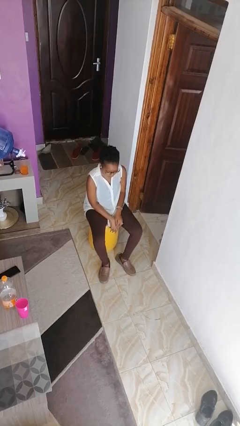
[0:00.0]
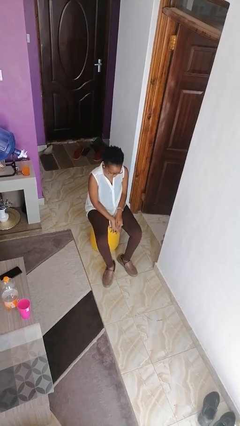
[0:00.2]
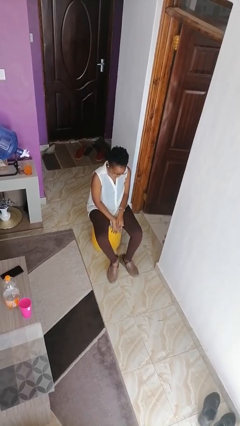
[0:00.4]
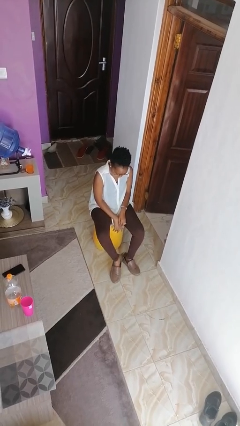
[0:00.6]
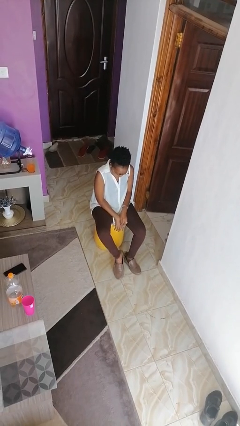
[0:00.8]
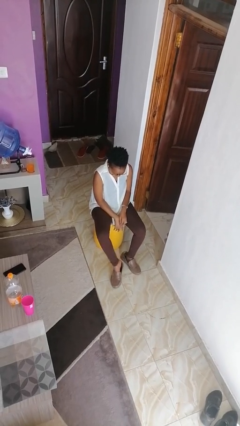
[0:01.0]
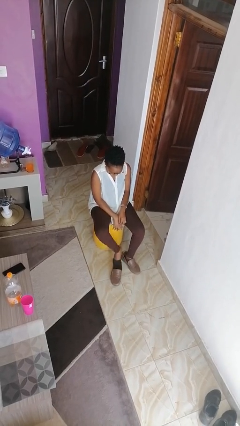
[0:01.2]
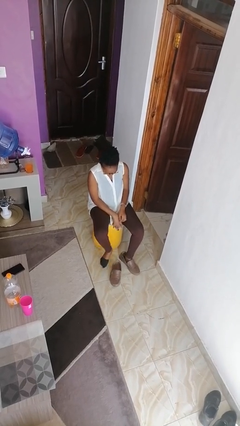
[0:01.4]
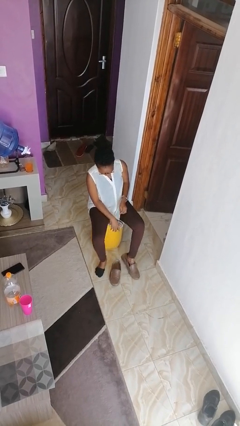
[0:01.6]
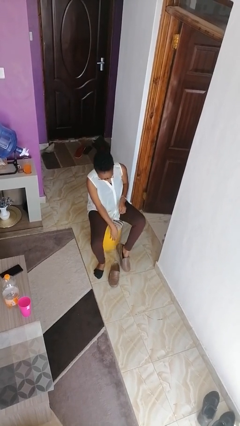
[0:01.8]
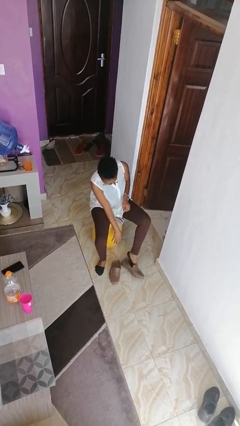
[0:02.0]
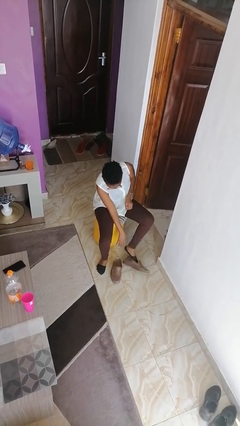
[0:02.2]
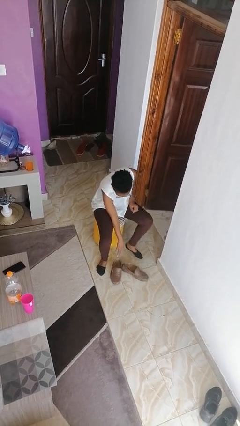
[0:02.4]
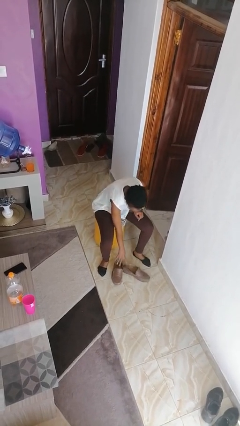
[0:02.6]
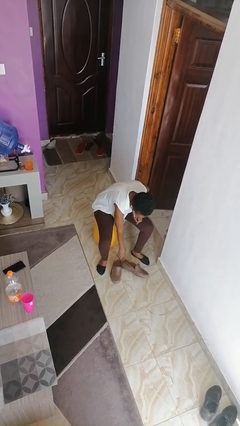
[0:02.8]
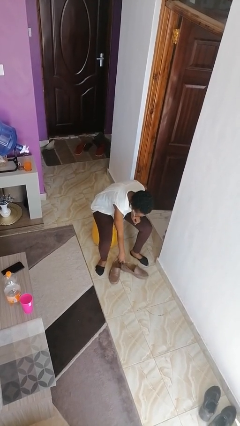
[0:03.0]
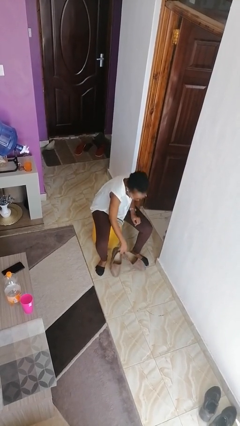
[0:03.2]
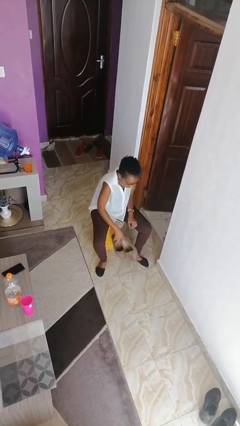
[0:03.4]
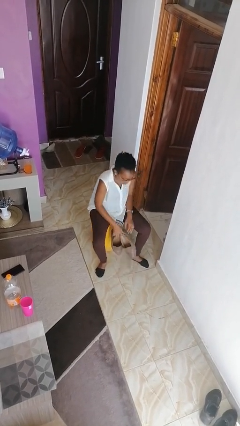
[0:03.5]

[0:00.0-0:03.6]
person takes off shoes

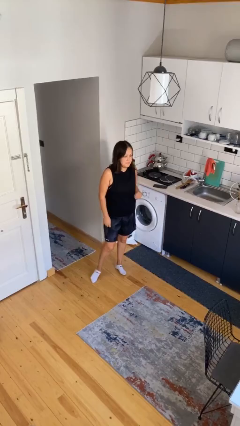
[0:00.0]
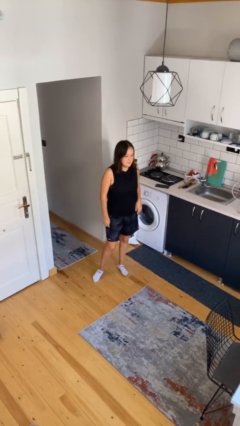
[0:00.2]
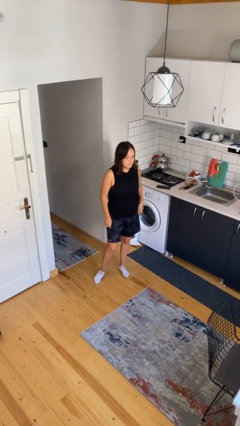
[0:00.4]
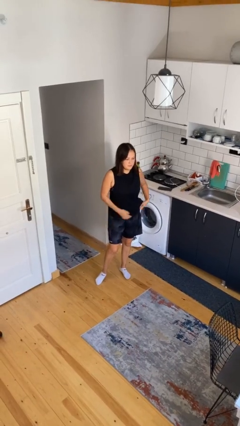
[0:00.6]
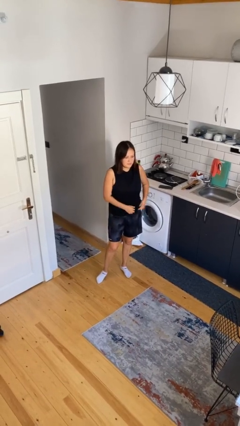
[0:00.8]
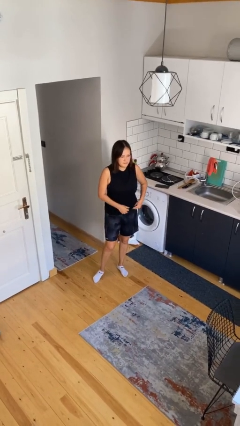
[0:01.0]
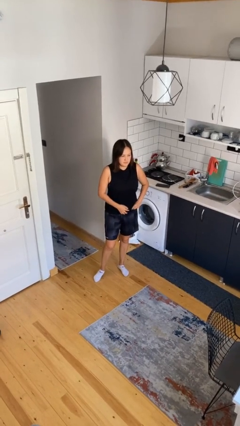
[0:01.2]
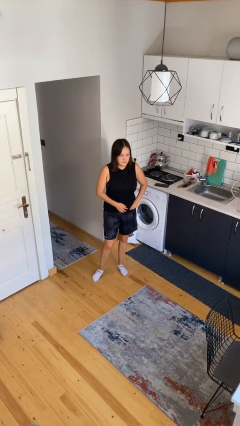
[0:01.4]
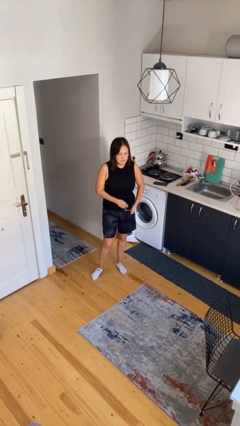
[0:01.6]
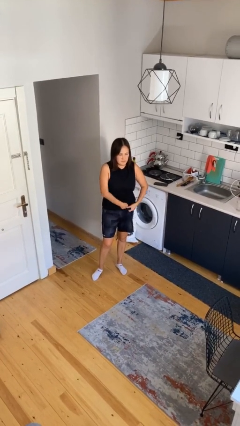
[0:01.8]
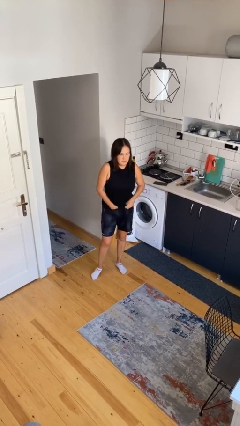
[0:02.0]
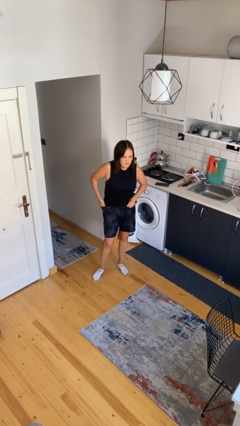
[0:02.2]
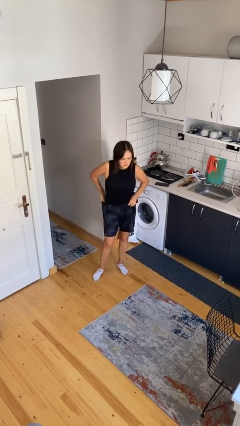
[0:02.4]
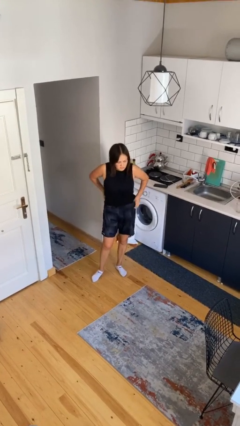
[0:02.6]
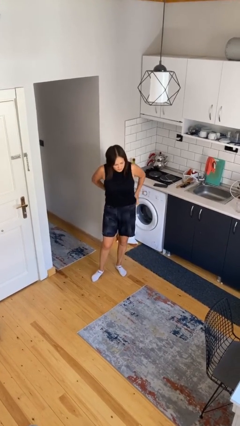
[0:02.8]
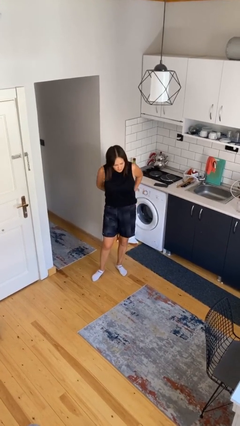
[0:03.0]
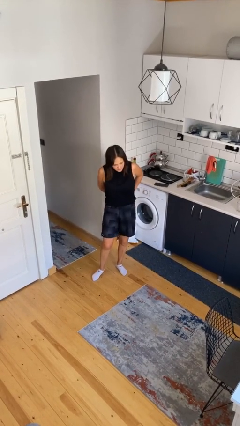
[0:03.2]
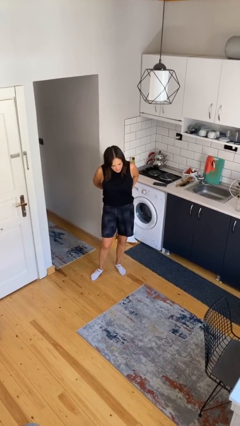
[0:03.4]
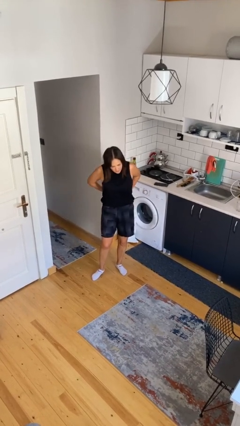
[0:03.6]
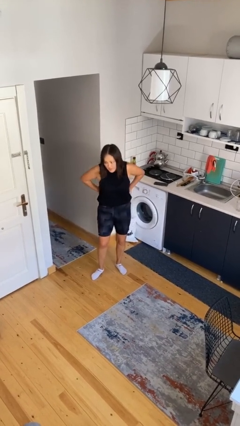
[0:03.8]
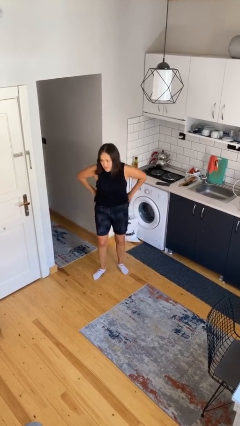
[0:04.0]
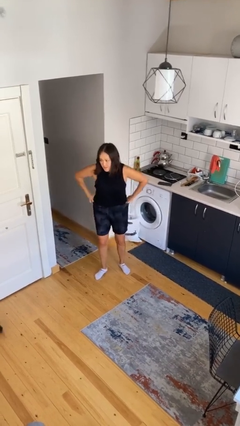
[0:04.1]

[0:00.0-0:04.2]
person tucks in shirt

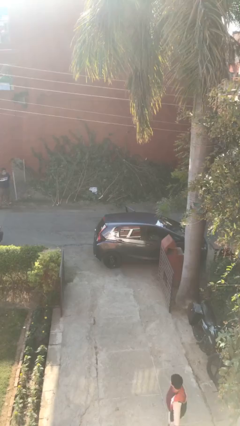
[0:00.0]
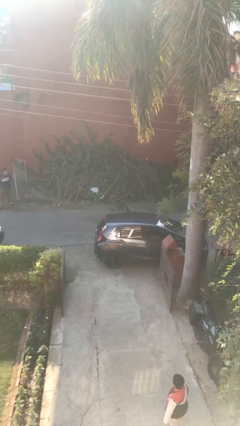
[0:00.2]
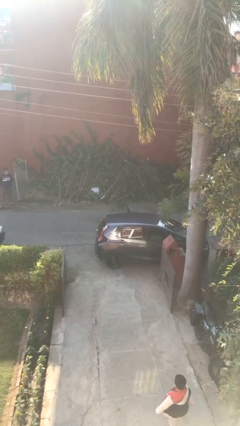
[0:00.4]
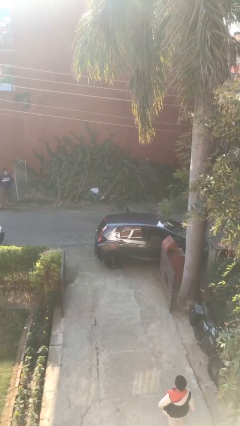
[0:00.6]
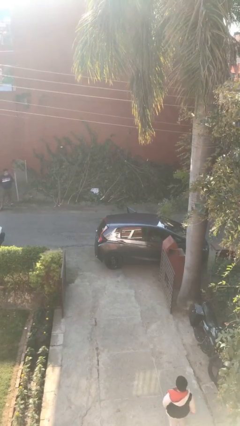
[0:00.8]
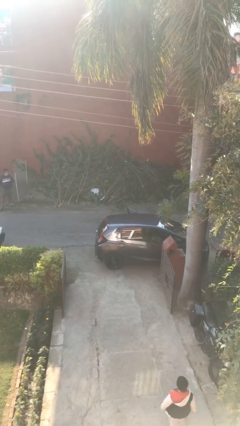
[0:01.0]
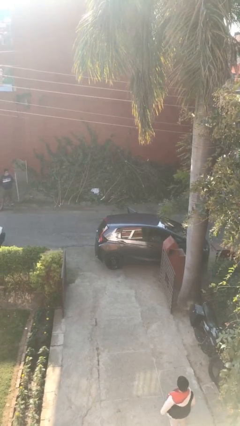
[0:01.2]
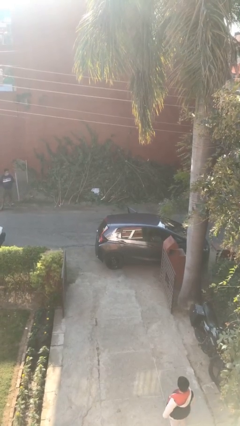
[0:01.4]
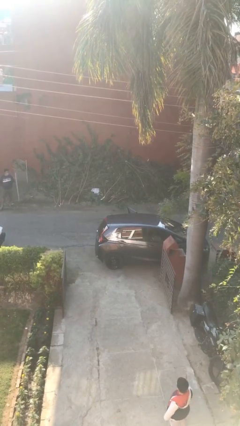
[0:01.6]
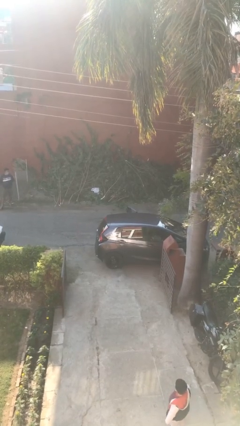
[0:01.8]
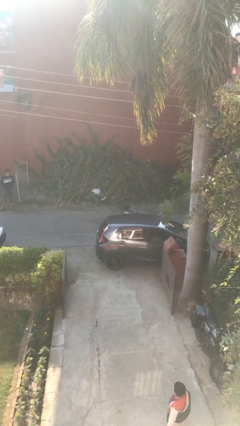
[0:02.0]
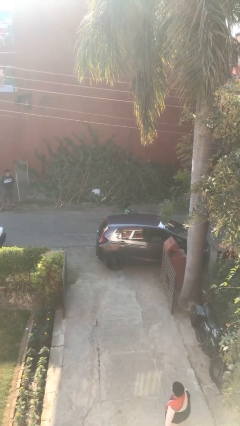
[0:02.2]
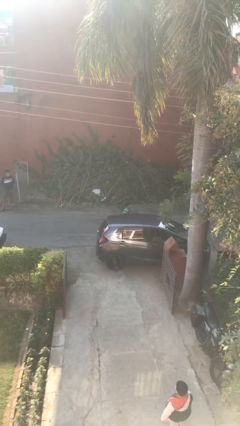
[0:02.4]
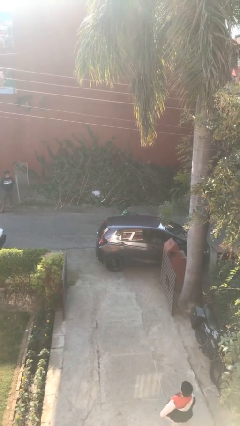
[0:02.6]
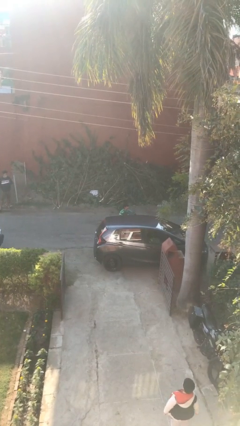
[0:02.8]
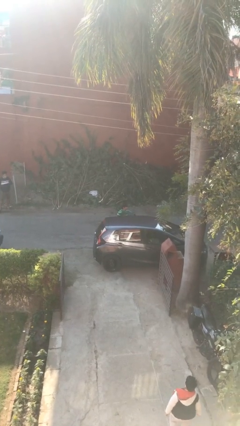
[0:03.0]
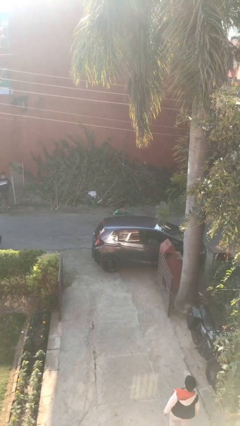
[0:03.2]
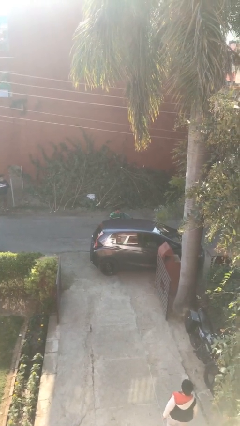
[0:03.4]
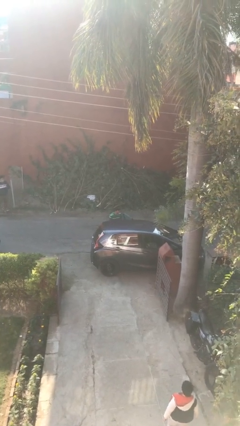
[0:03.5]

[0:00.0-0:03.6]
person exits car

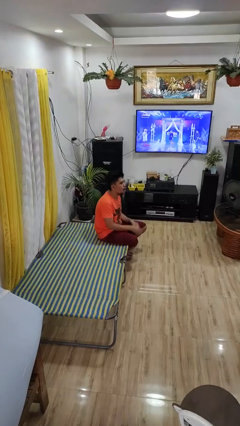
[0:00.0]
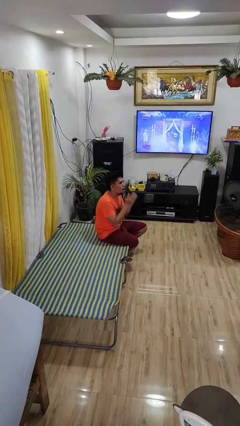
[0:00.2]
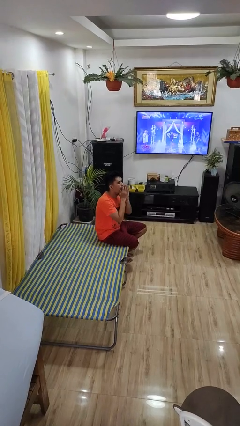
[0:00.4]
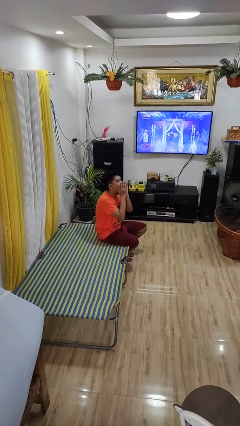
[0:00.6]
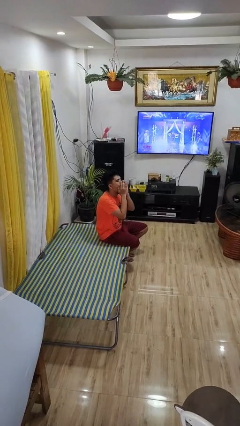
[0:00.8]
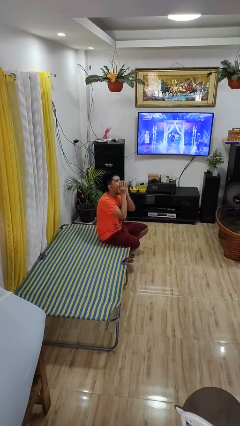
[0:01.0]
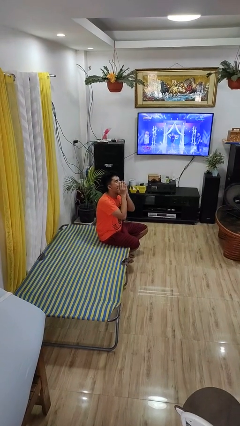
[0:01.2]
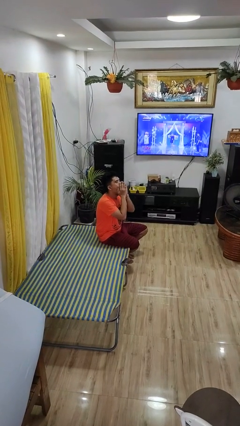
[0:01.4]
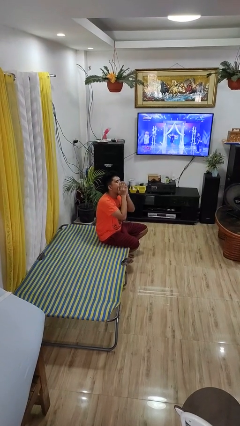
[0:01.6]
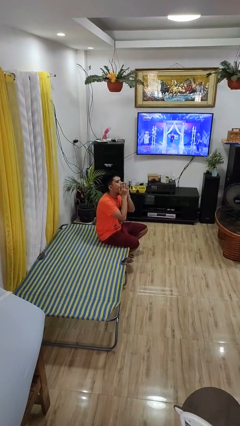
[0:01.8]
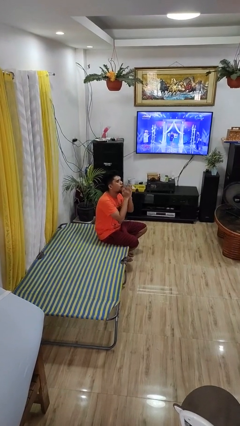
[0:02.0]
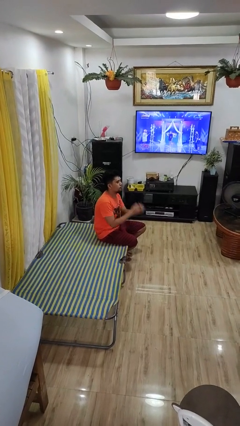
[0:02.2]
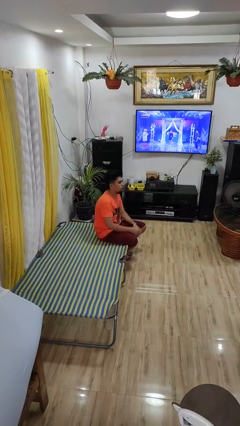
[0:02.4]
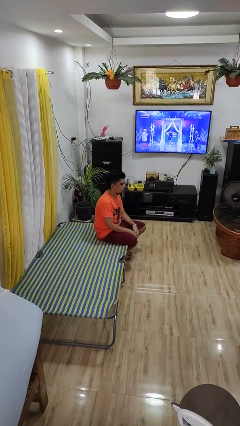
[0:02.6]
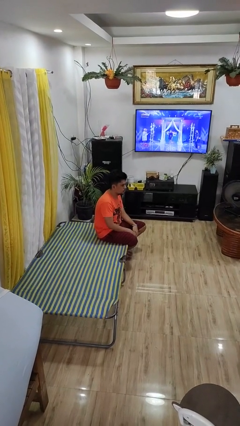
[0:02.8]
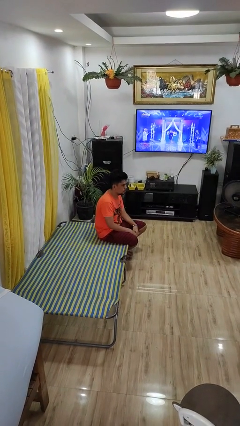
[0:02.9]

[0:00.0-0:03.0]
person yawns

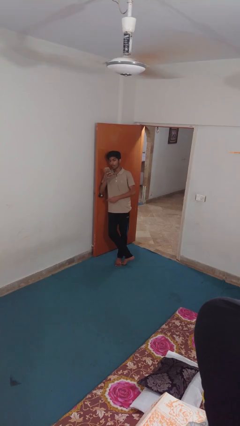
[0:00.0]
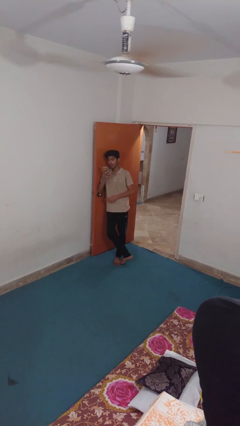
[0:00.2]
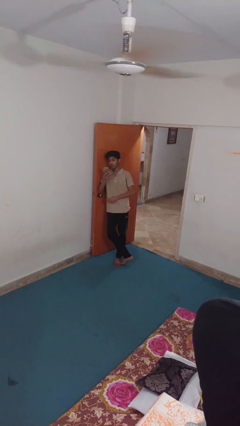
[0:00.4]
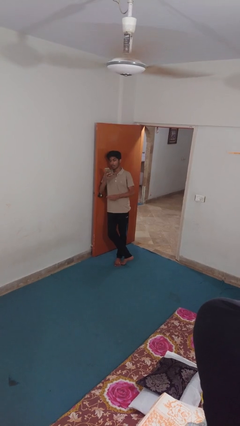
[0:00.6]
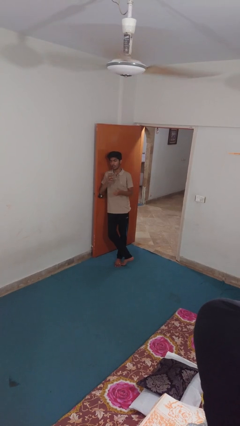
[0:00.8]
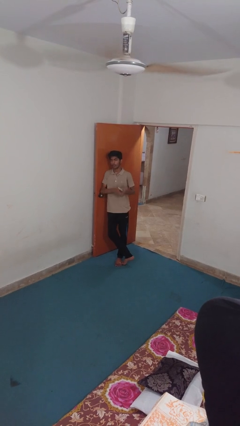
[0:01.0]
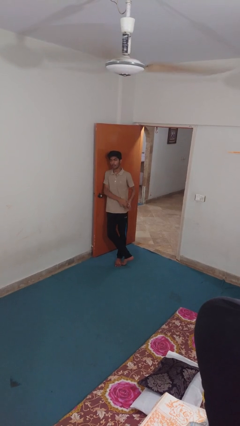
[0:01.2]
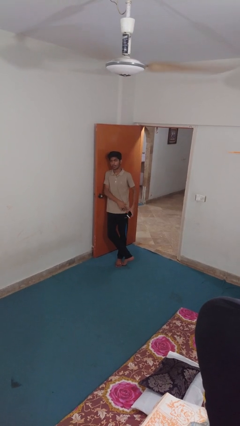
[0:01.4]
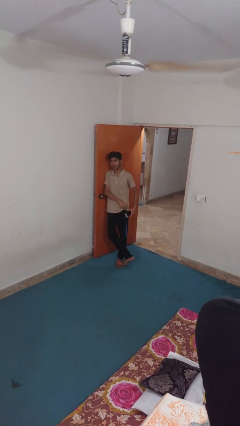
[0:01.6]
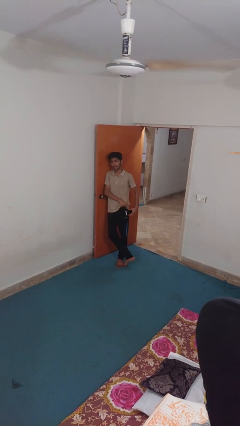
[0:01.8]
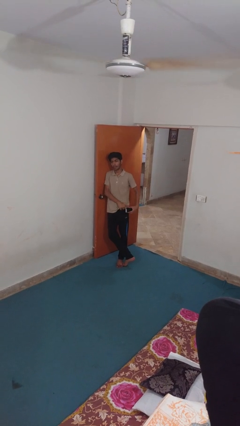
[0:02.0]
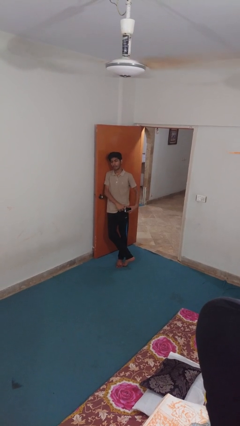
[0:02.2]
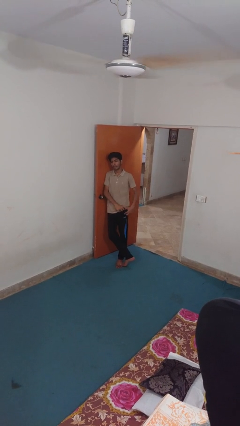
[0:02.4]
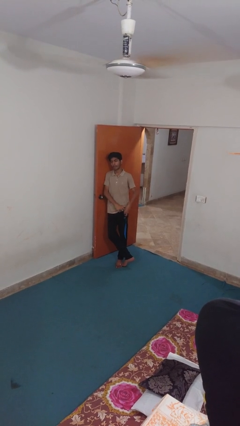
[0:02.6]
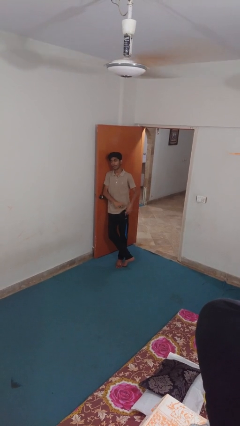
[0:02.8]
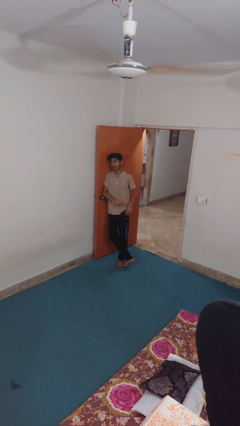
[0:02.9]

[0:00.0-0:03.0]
person puts phone into pocket
